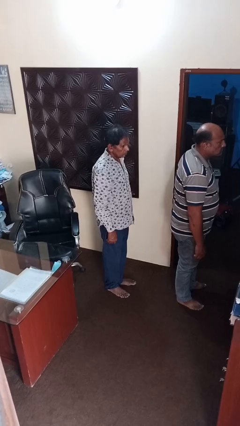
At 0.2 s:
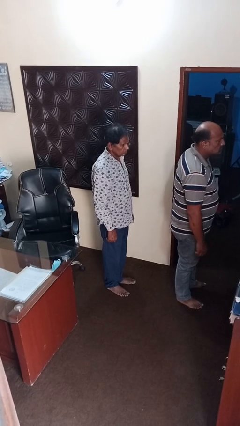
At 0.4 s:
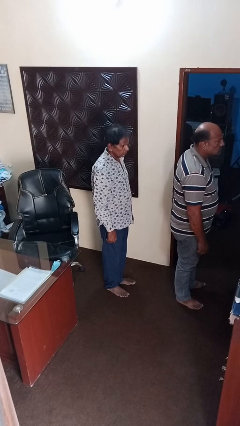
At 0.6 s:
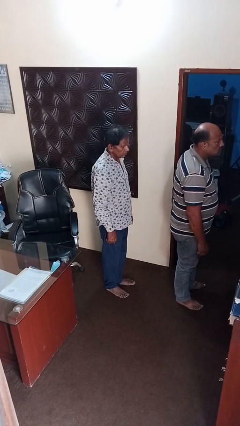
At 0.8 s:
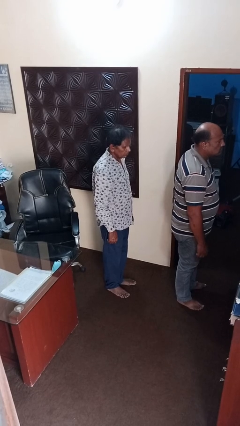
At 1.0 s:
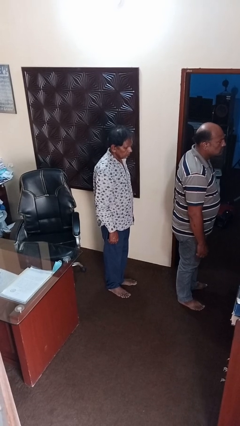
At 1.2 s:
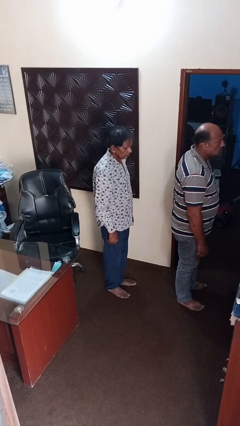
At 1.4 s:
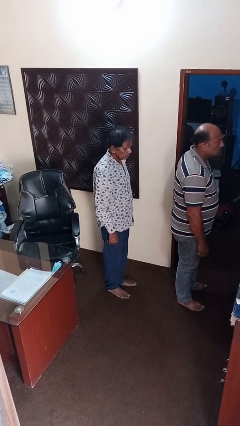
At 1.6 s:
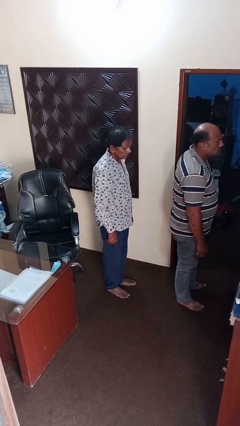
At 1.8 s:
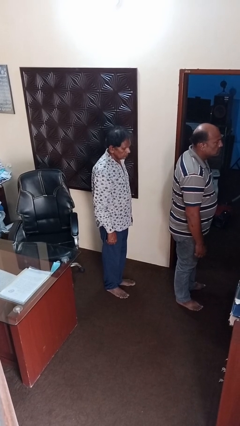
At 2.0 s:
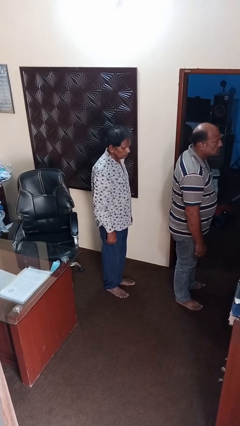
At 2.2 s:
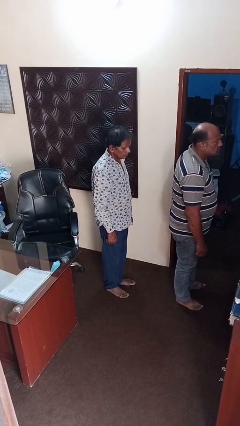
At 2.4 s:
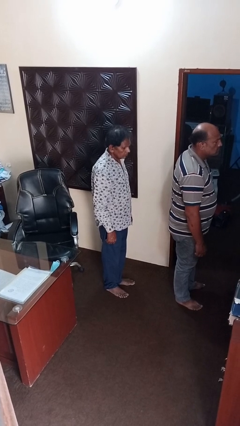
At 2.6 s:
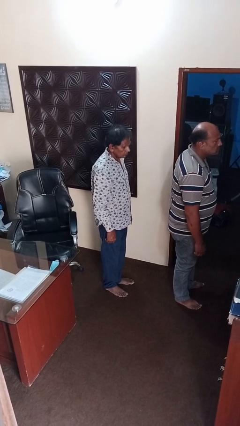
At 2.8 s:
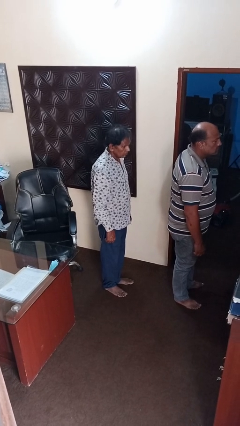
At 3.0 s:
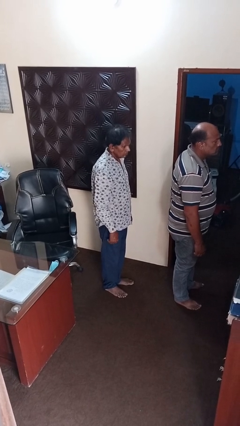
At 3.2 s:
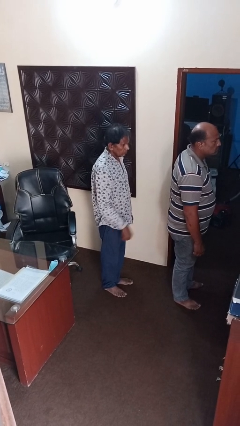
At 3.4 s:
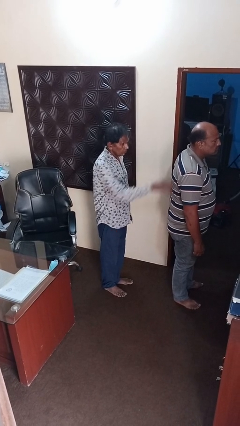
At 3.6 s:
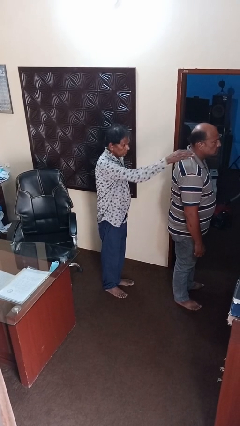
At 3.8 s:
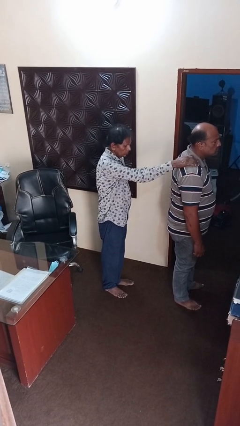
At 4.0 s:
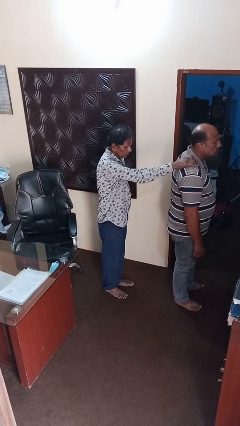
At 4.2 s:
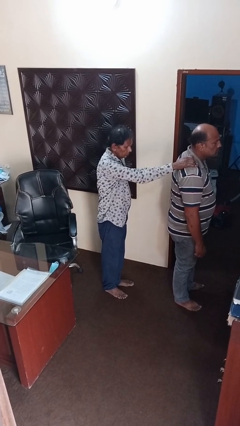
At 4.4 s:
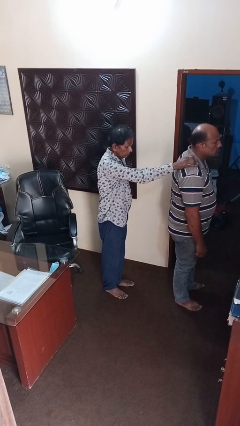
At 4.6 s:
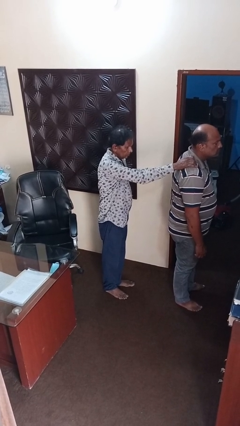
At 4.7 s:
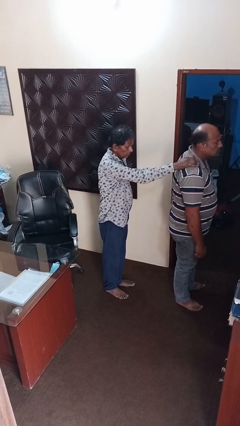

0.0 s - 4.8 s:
person grabs person by shoulder

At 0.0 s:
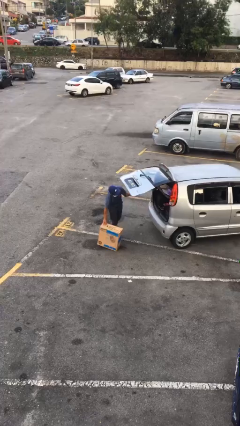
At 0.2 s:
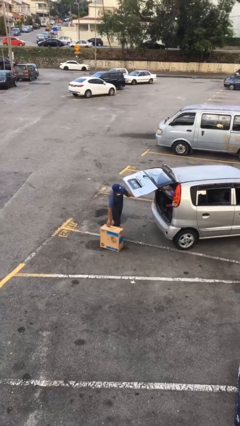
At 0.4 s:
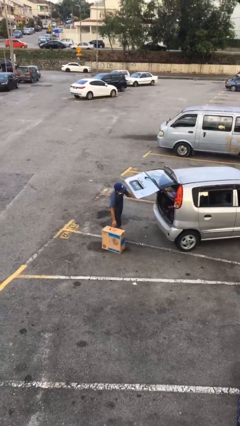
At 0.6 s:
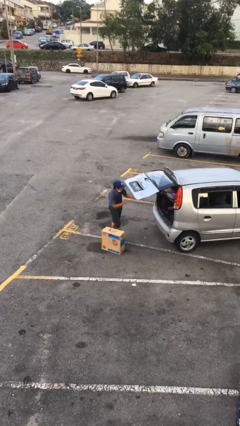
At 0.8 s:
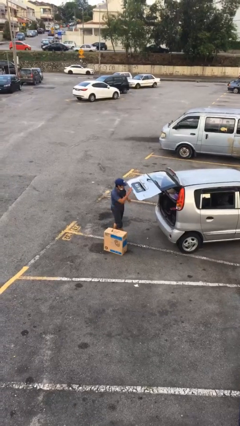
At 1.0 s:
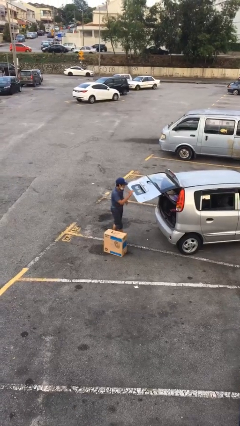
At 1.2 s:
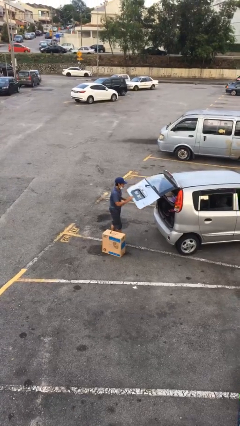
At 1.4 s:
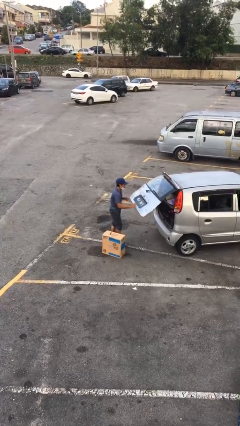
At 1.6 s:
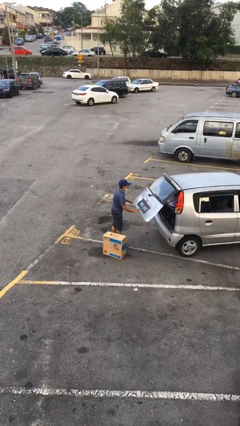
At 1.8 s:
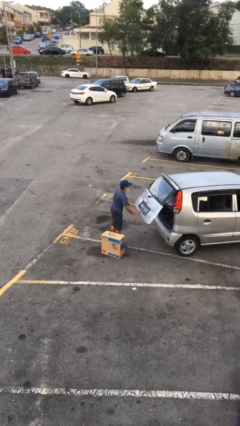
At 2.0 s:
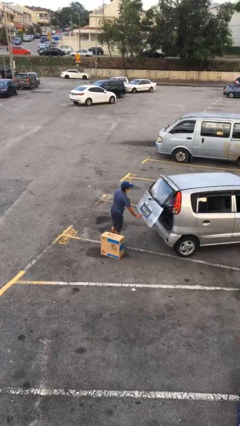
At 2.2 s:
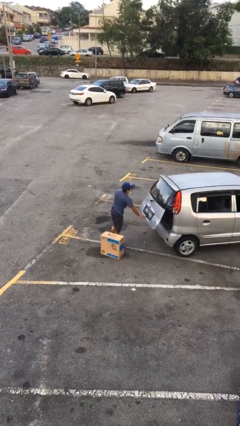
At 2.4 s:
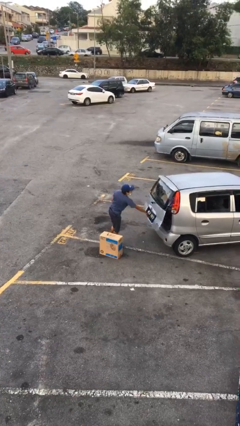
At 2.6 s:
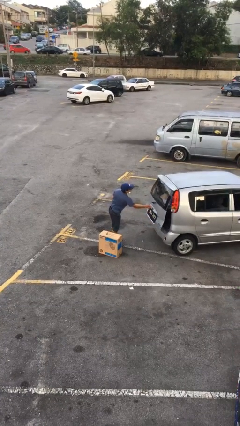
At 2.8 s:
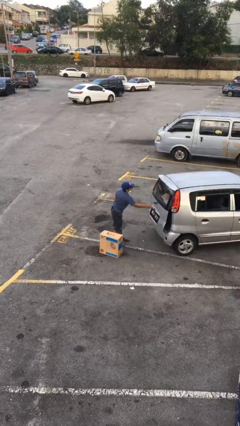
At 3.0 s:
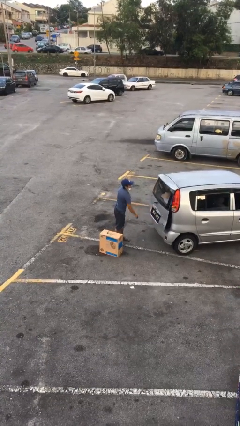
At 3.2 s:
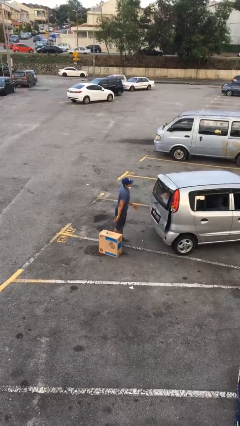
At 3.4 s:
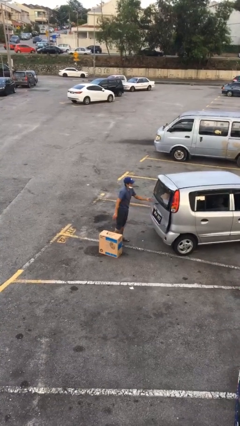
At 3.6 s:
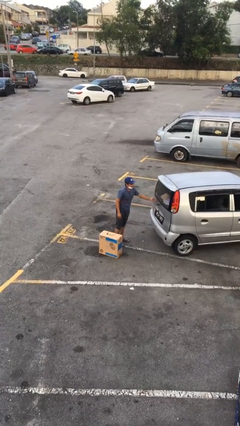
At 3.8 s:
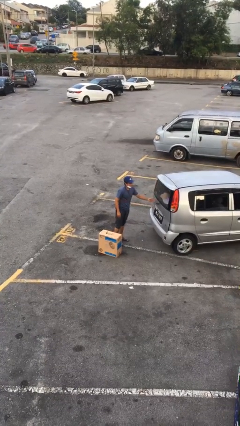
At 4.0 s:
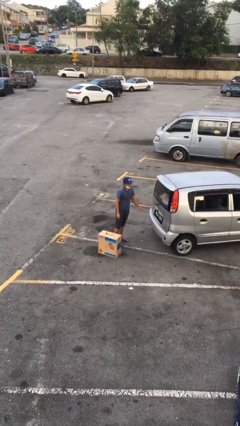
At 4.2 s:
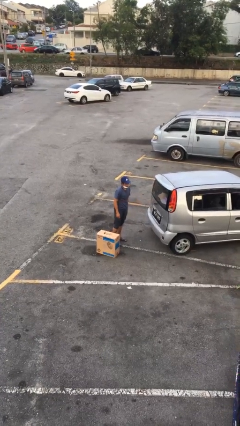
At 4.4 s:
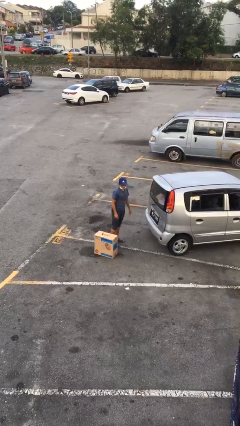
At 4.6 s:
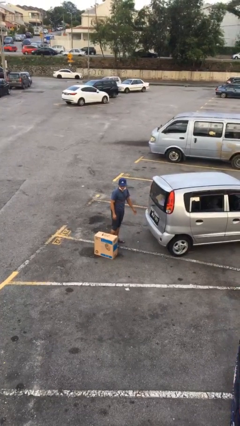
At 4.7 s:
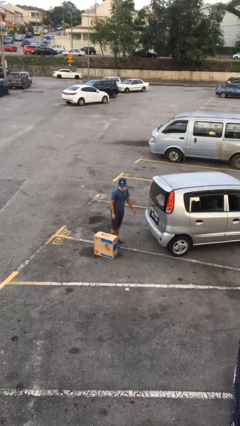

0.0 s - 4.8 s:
person closes car trunk

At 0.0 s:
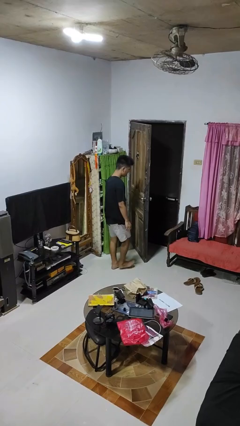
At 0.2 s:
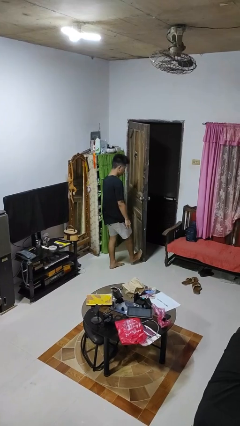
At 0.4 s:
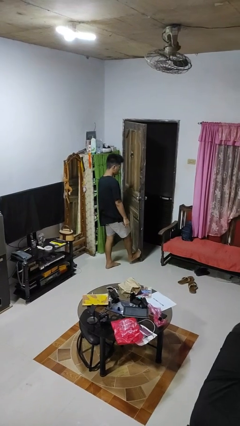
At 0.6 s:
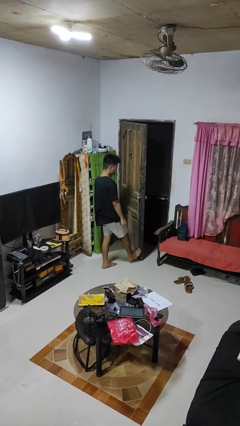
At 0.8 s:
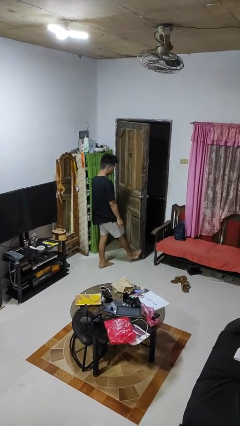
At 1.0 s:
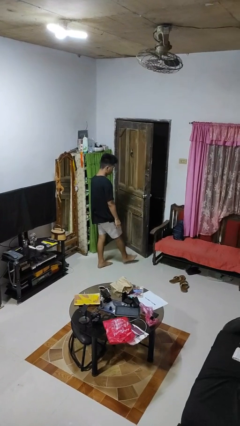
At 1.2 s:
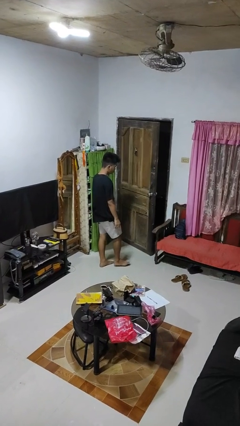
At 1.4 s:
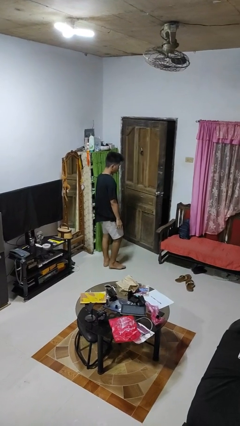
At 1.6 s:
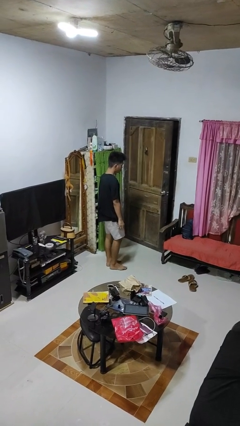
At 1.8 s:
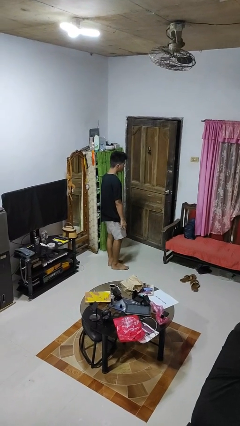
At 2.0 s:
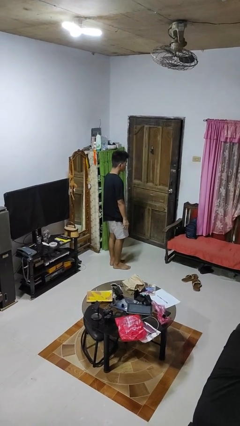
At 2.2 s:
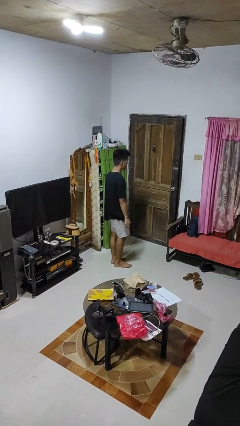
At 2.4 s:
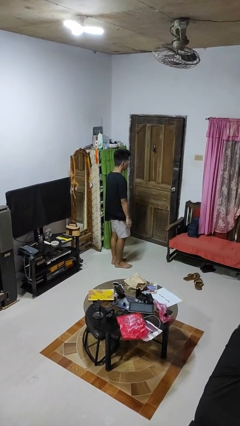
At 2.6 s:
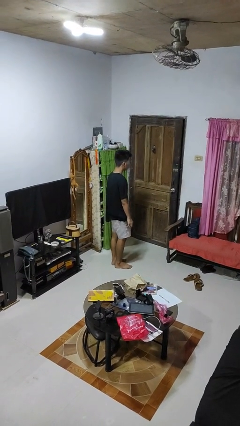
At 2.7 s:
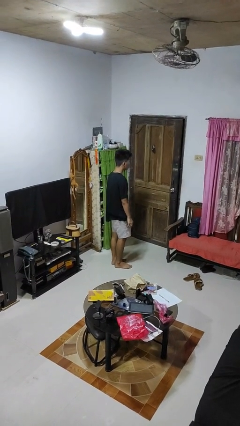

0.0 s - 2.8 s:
person closes door with foot

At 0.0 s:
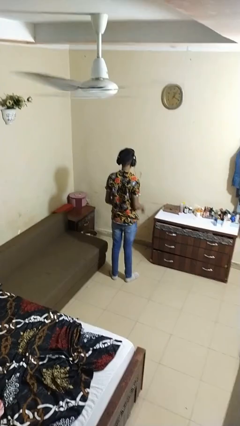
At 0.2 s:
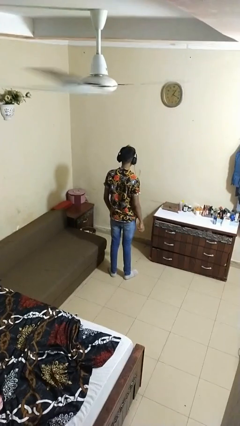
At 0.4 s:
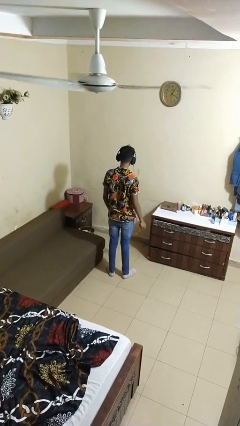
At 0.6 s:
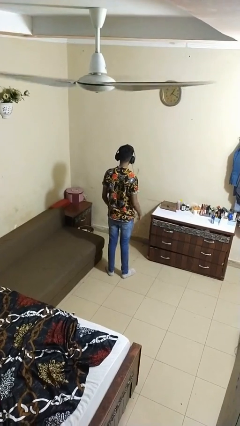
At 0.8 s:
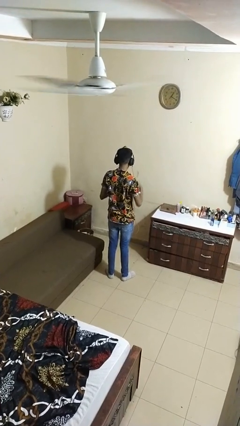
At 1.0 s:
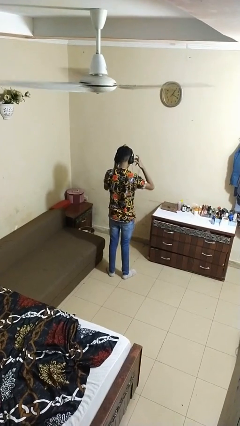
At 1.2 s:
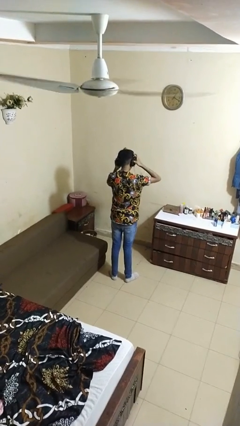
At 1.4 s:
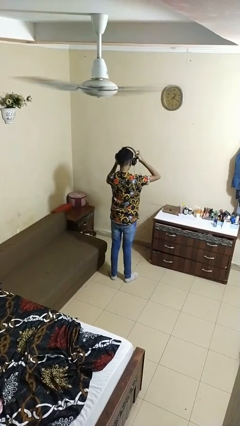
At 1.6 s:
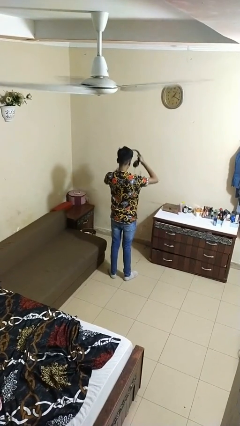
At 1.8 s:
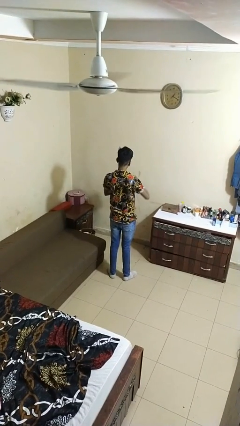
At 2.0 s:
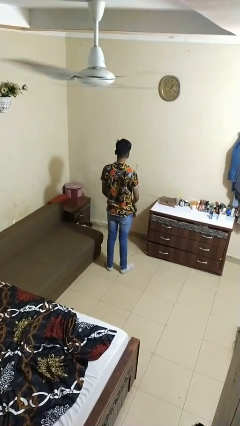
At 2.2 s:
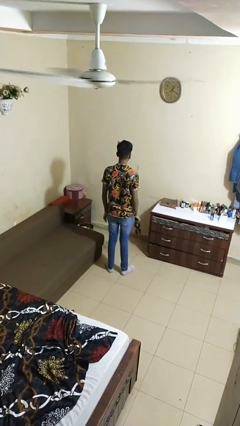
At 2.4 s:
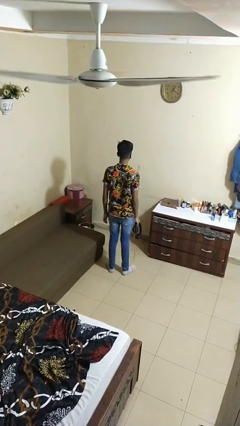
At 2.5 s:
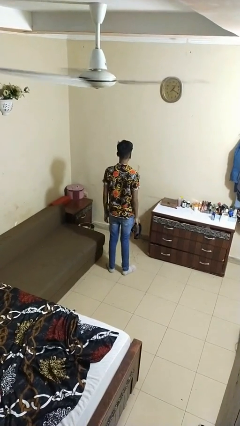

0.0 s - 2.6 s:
person takes off headphones

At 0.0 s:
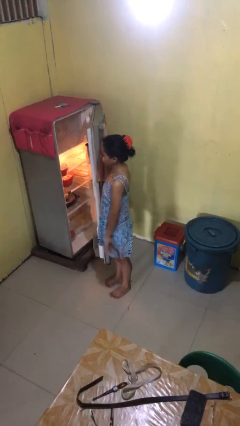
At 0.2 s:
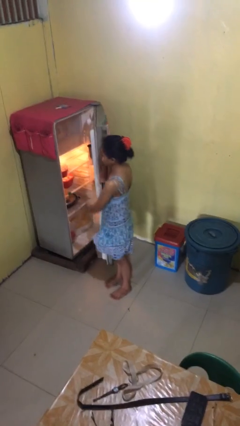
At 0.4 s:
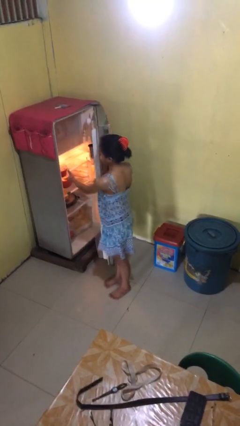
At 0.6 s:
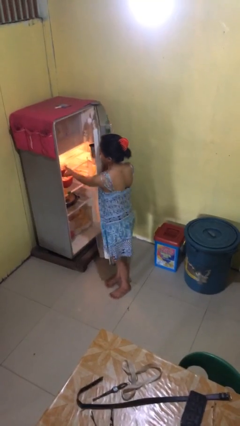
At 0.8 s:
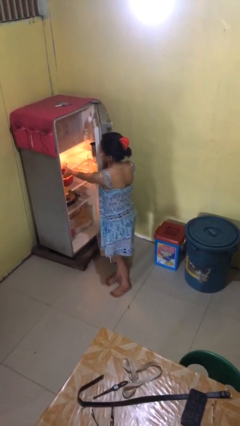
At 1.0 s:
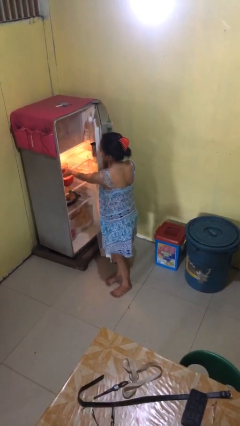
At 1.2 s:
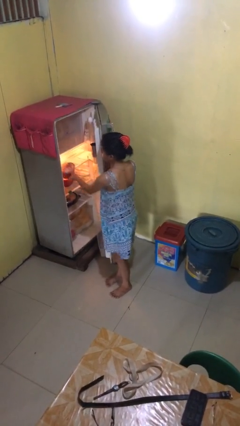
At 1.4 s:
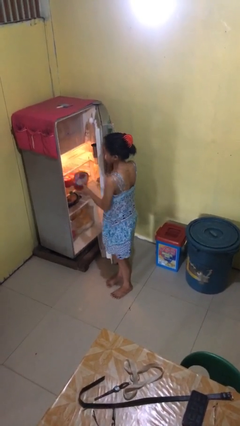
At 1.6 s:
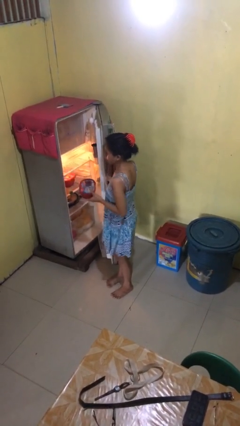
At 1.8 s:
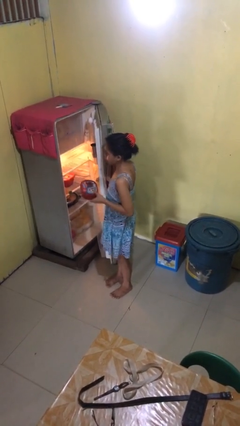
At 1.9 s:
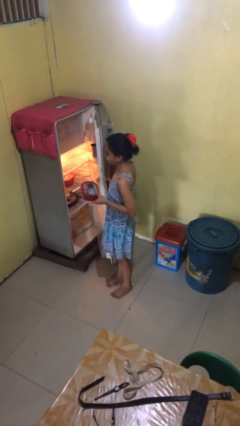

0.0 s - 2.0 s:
person takes object from refrigerator
